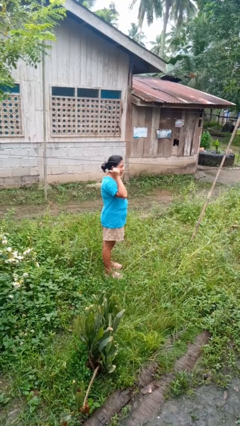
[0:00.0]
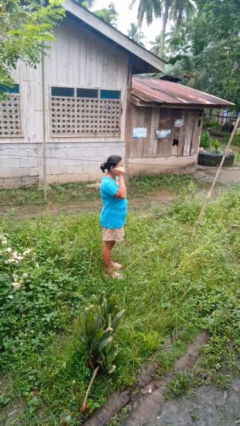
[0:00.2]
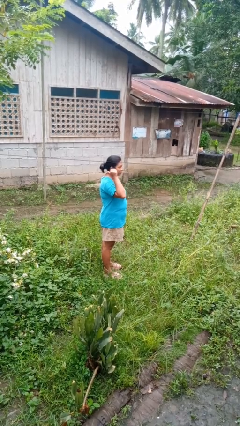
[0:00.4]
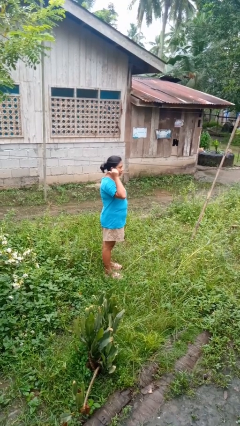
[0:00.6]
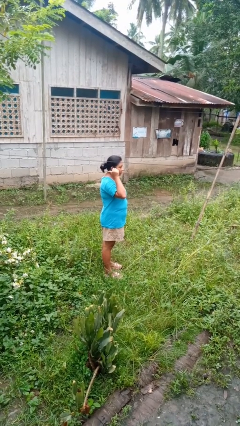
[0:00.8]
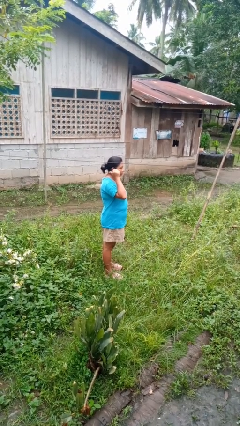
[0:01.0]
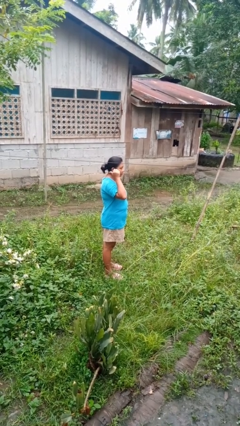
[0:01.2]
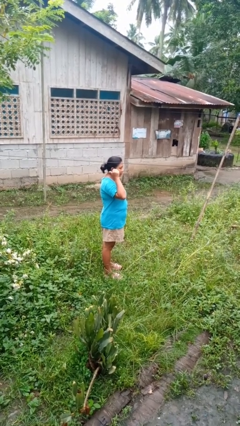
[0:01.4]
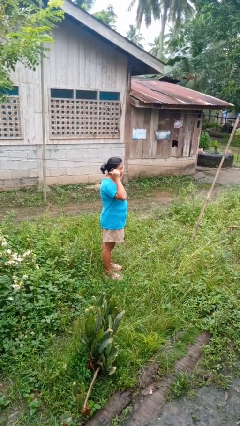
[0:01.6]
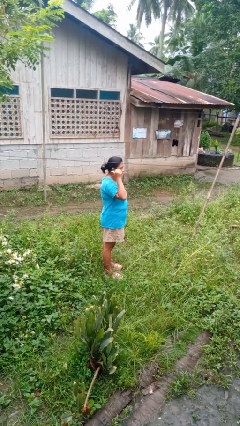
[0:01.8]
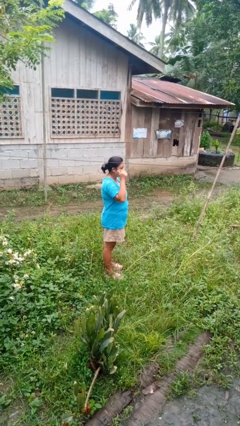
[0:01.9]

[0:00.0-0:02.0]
person gestures behind me

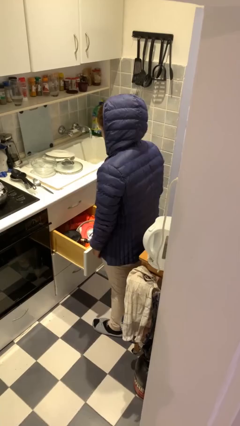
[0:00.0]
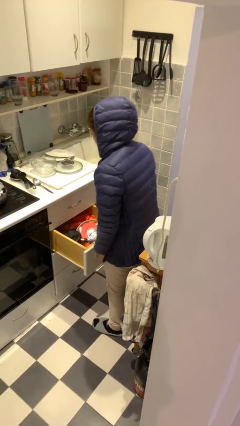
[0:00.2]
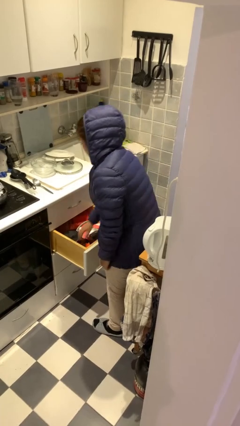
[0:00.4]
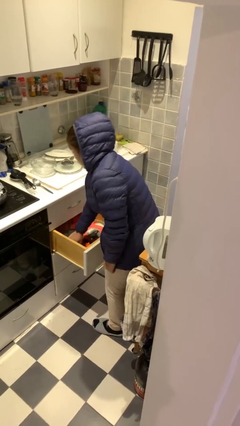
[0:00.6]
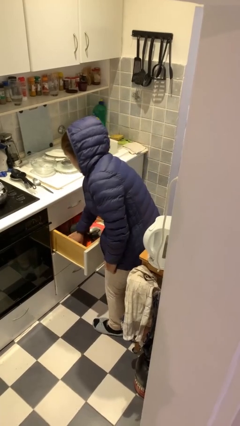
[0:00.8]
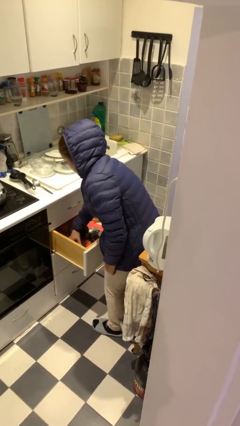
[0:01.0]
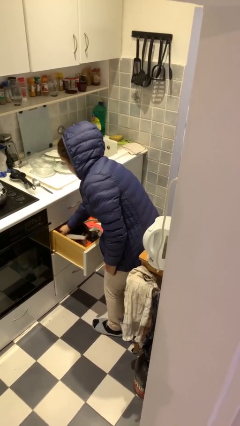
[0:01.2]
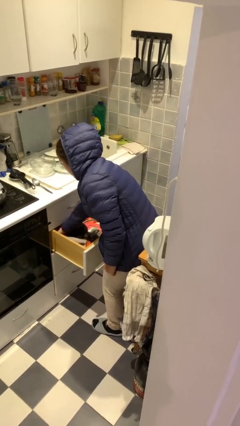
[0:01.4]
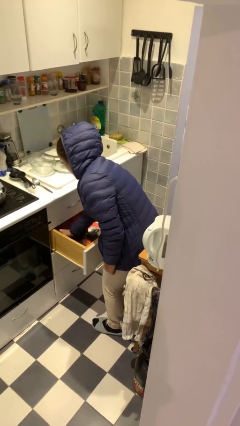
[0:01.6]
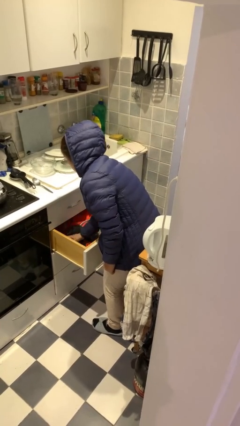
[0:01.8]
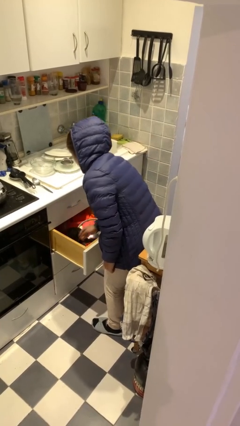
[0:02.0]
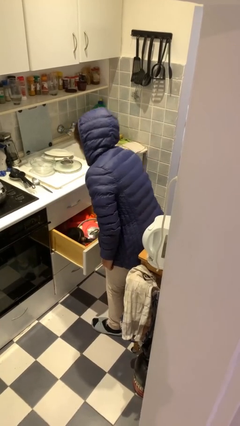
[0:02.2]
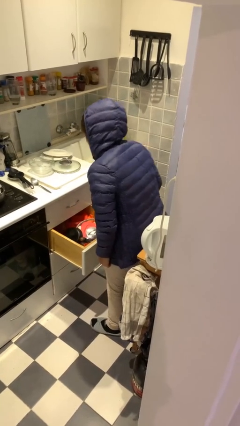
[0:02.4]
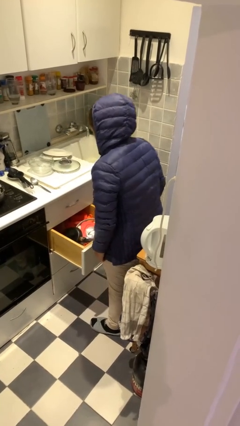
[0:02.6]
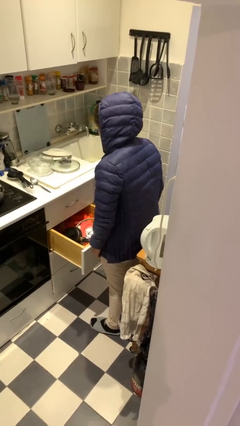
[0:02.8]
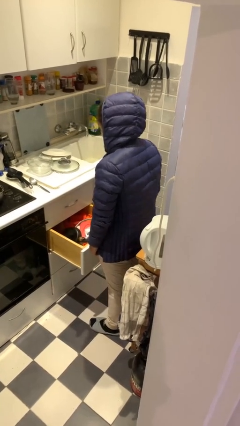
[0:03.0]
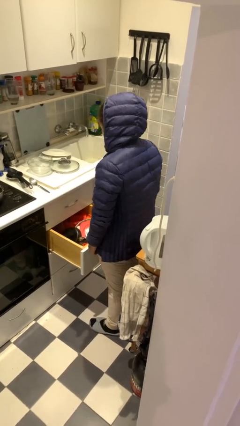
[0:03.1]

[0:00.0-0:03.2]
person searches in kitchen drawer

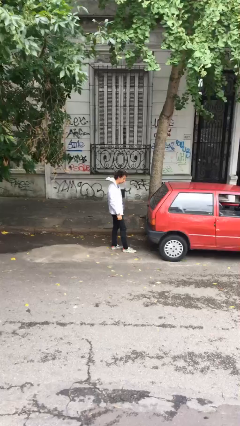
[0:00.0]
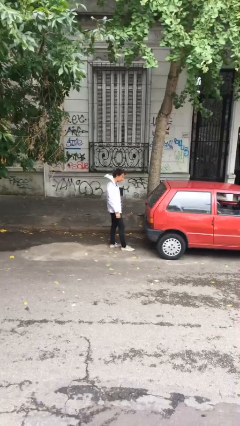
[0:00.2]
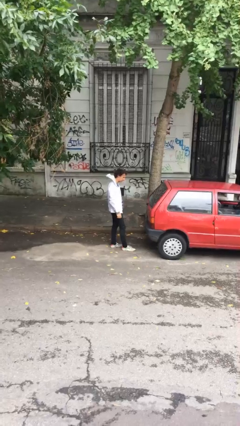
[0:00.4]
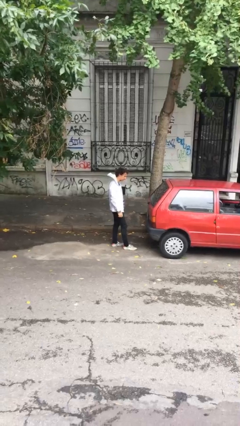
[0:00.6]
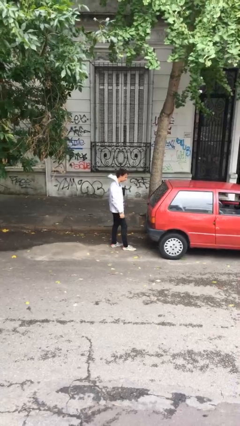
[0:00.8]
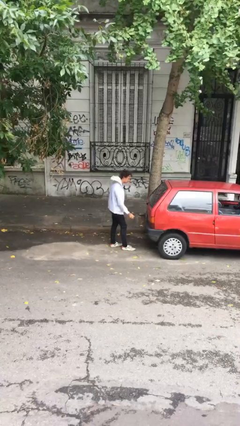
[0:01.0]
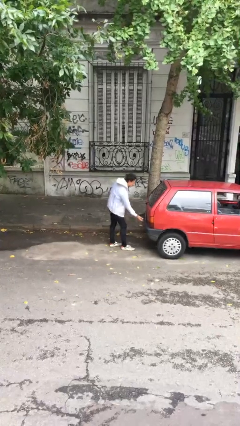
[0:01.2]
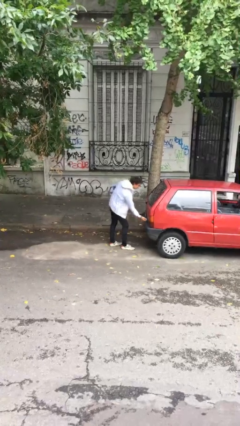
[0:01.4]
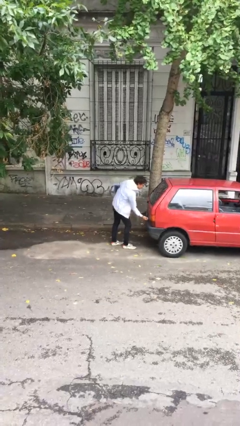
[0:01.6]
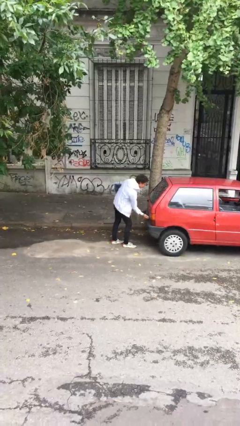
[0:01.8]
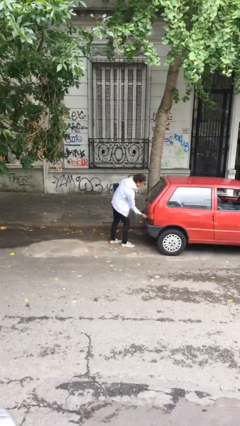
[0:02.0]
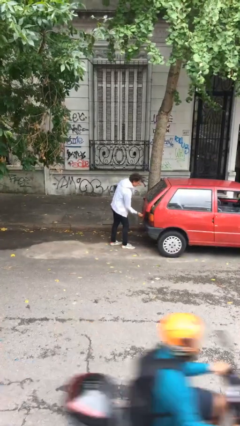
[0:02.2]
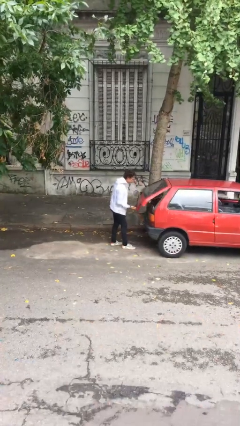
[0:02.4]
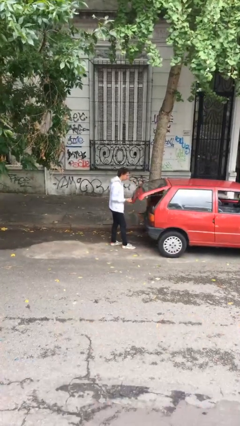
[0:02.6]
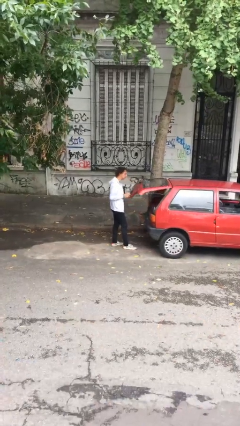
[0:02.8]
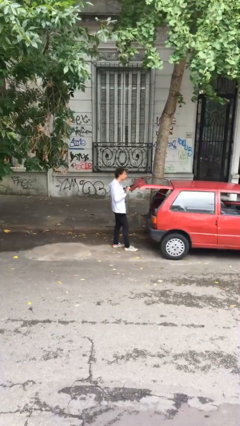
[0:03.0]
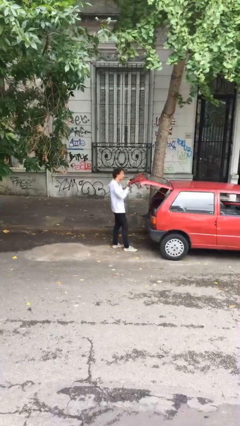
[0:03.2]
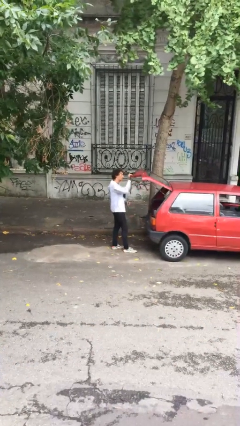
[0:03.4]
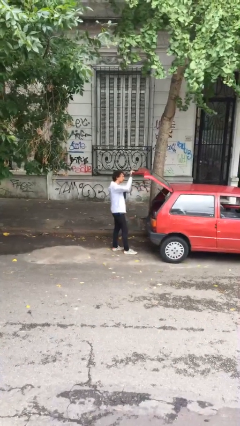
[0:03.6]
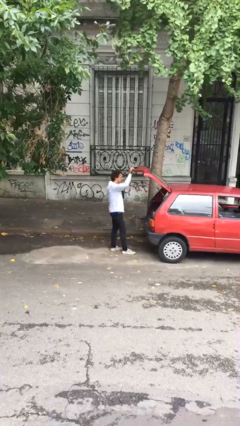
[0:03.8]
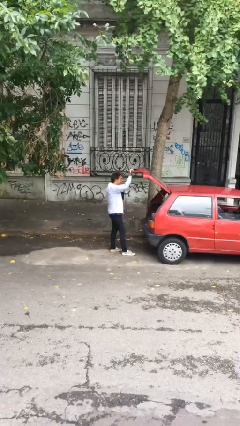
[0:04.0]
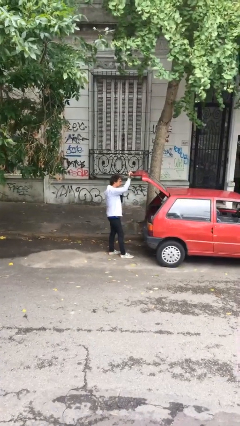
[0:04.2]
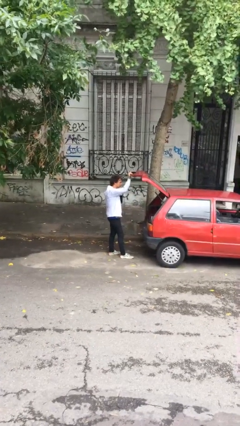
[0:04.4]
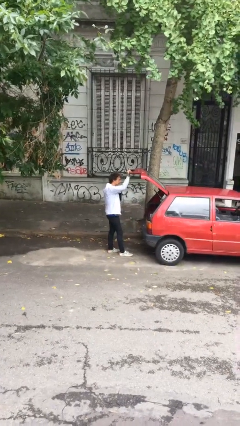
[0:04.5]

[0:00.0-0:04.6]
person opens car trunk

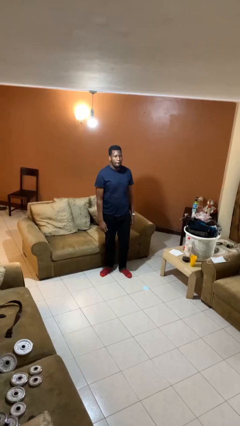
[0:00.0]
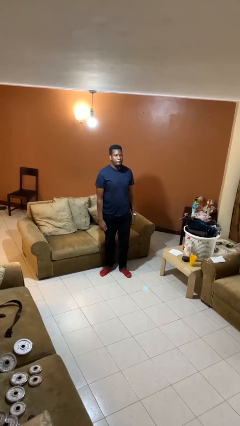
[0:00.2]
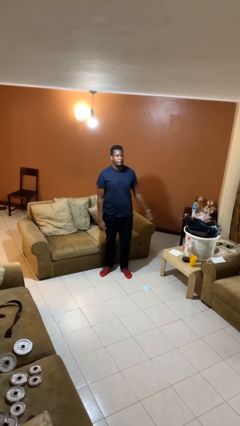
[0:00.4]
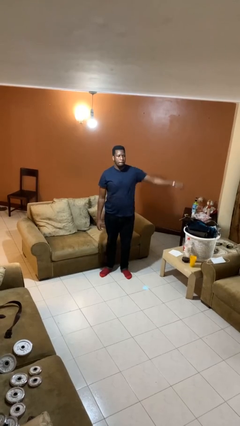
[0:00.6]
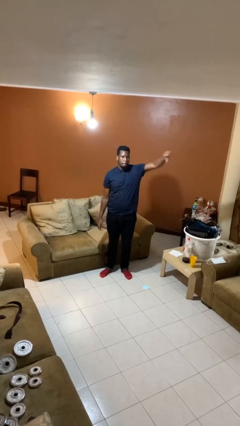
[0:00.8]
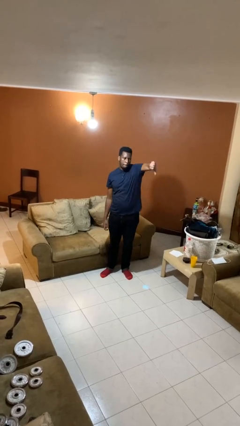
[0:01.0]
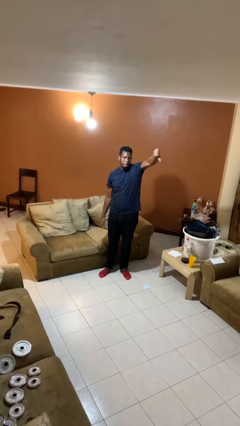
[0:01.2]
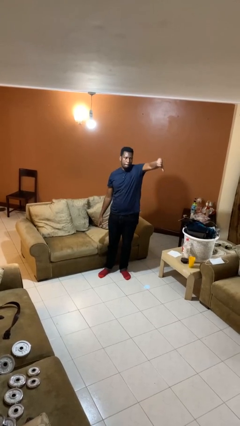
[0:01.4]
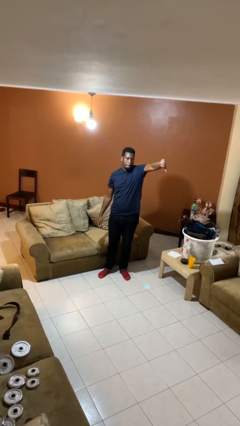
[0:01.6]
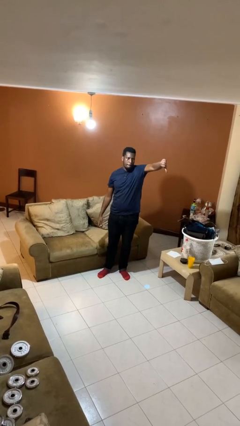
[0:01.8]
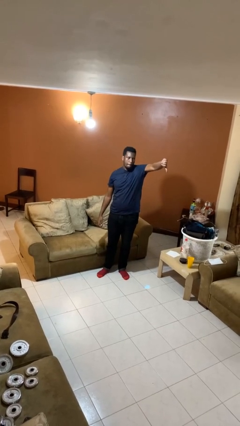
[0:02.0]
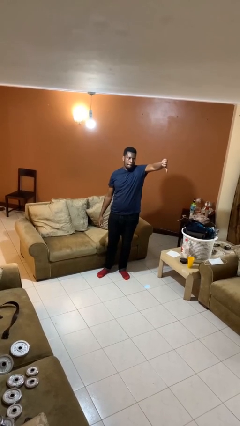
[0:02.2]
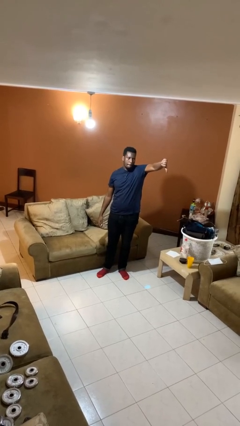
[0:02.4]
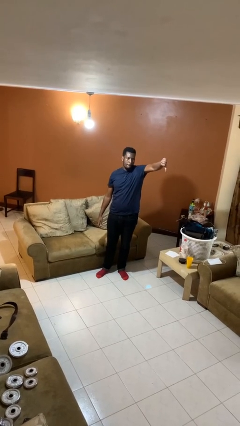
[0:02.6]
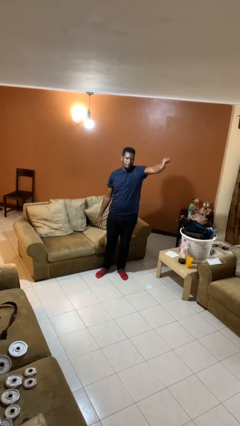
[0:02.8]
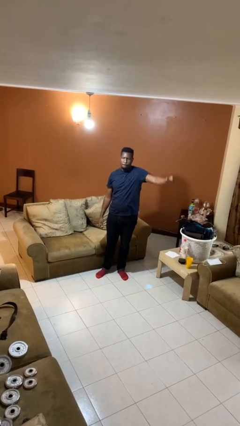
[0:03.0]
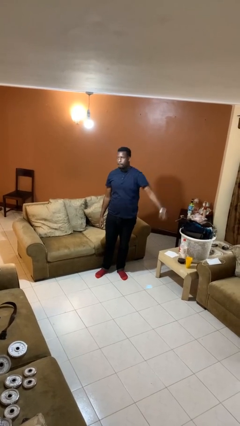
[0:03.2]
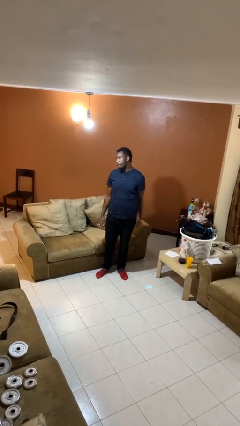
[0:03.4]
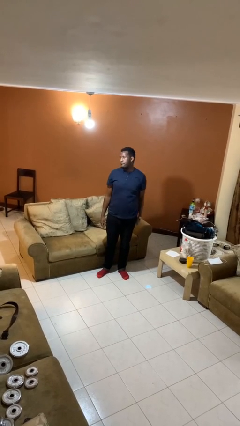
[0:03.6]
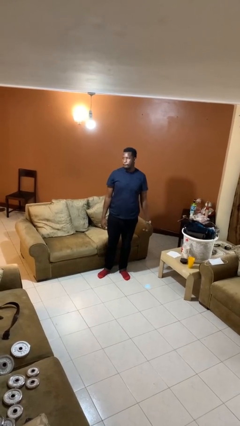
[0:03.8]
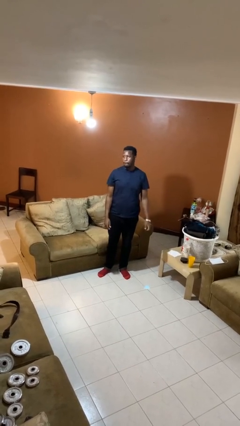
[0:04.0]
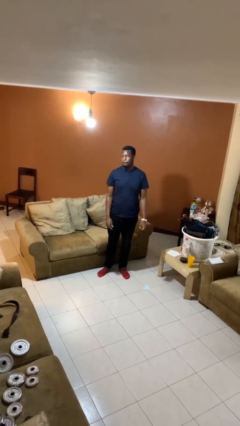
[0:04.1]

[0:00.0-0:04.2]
person gestures thumbs down

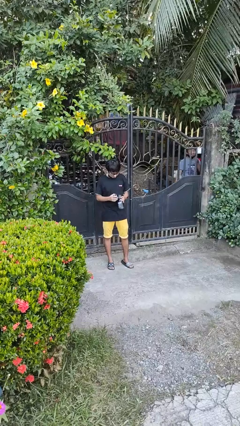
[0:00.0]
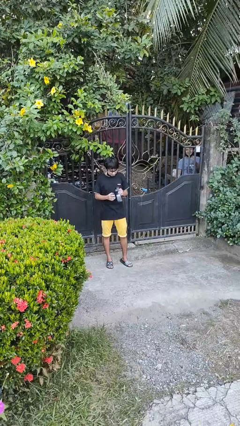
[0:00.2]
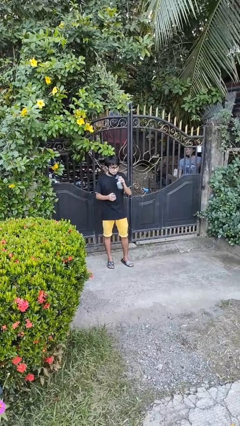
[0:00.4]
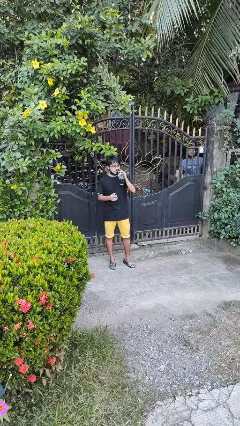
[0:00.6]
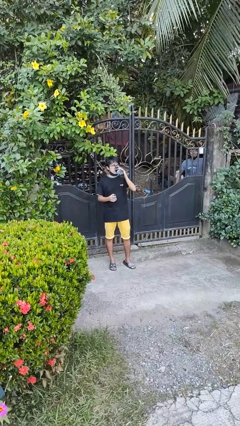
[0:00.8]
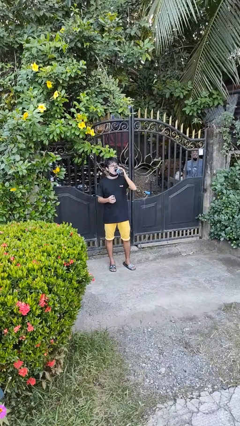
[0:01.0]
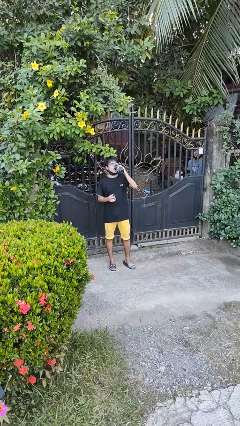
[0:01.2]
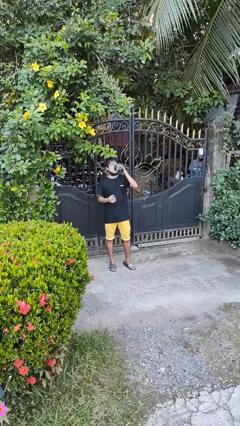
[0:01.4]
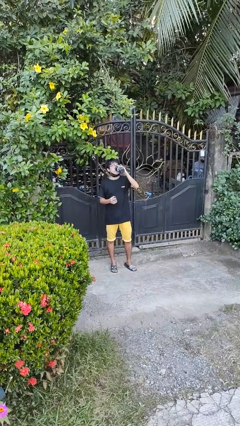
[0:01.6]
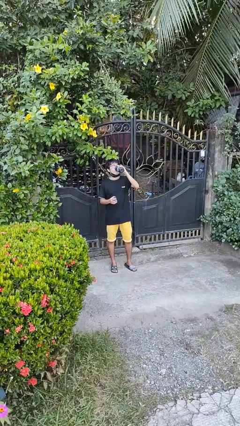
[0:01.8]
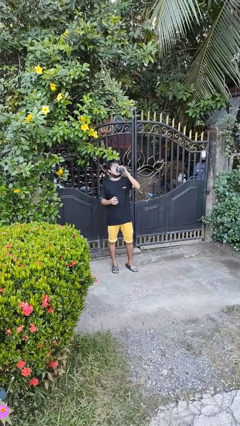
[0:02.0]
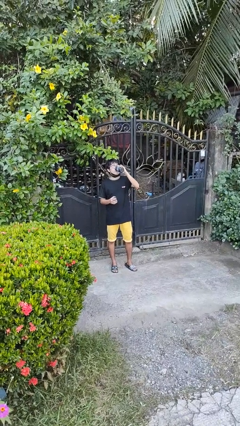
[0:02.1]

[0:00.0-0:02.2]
person drinks from bottle

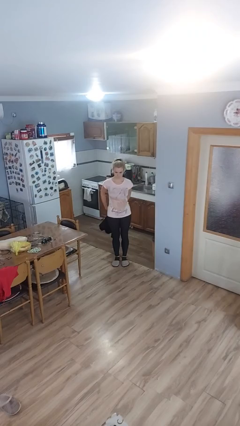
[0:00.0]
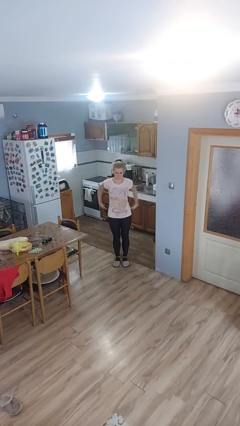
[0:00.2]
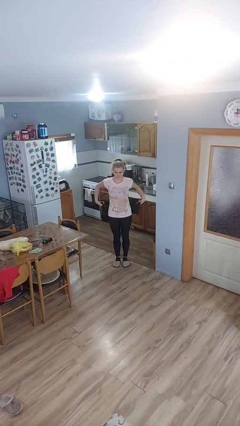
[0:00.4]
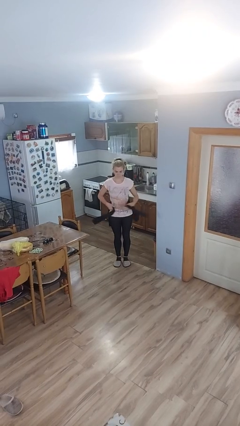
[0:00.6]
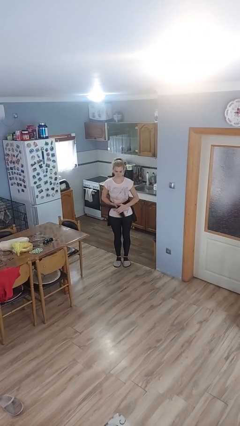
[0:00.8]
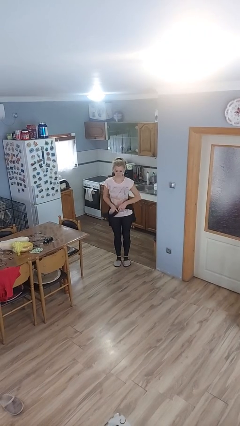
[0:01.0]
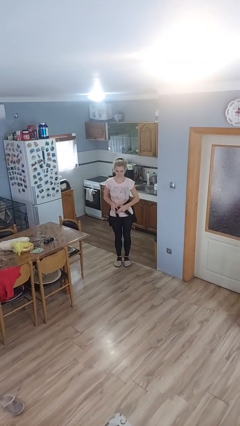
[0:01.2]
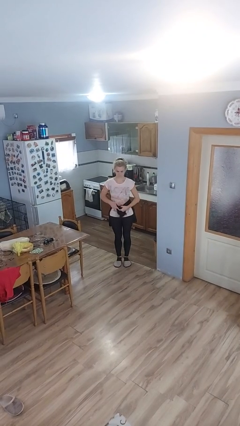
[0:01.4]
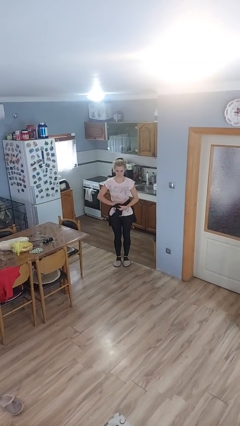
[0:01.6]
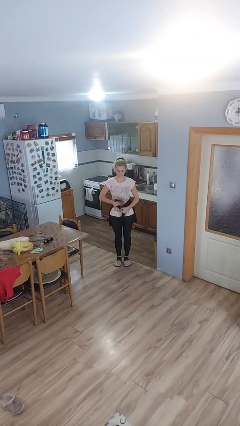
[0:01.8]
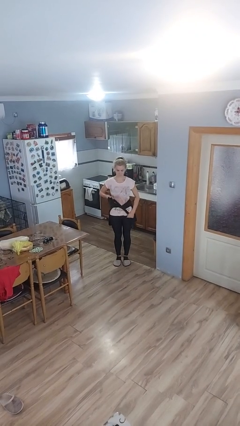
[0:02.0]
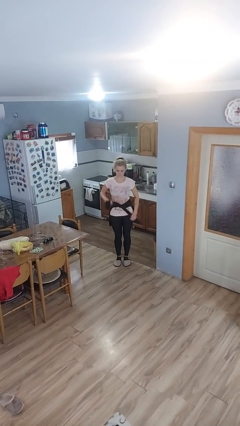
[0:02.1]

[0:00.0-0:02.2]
person ties jacket around waist
